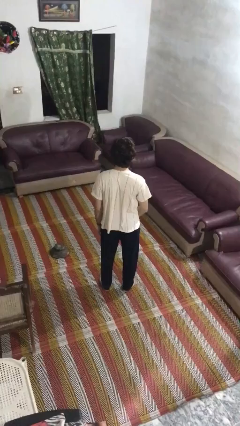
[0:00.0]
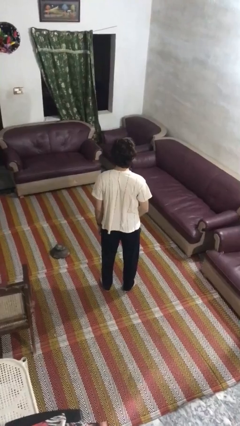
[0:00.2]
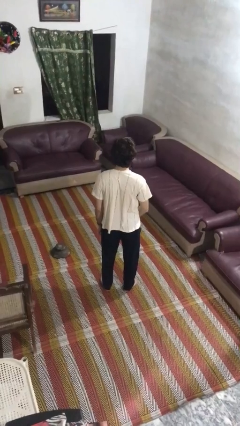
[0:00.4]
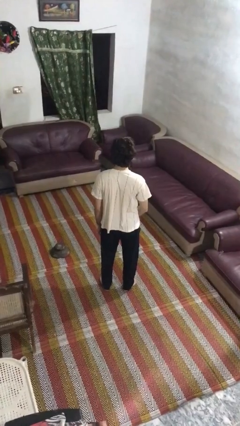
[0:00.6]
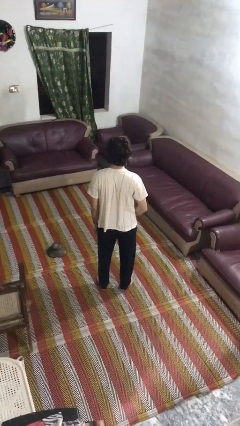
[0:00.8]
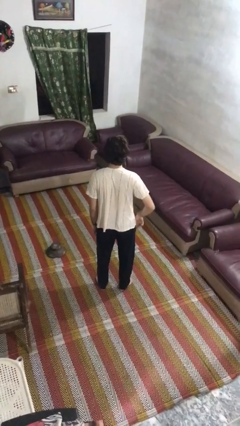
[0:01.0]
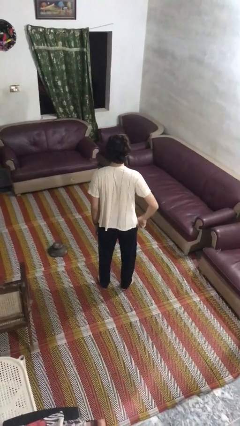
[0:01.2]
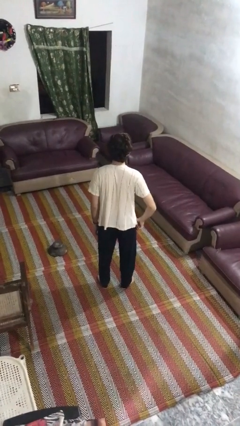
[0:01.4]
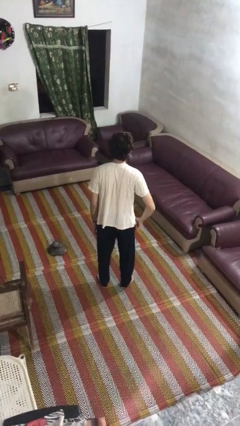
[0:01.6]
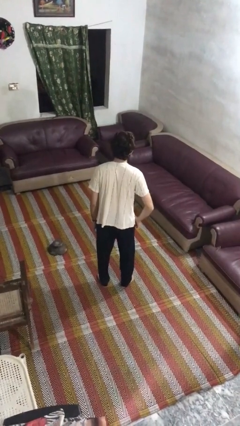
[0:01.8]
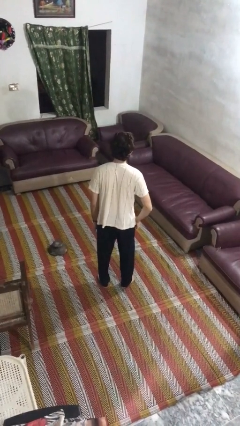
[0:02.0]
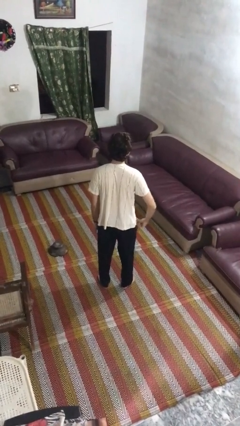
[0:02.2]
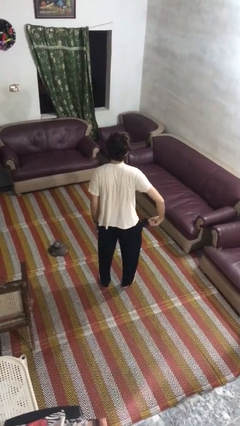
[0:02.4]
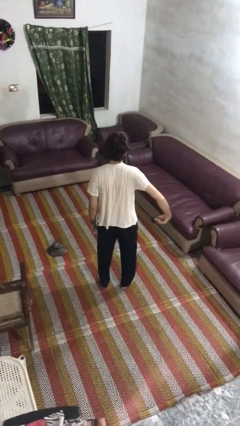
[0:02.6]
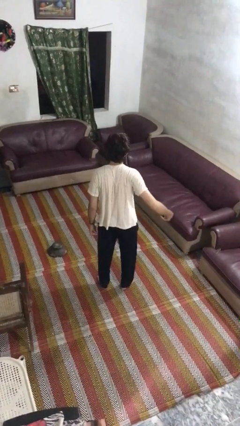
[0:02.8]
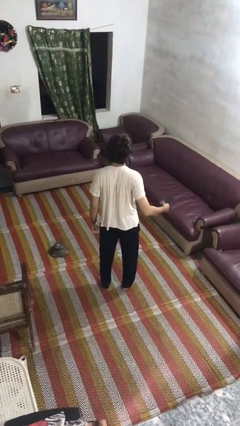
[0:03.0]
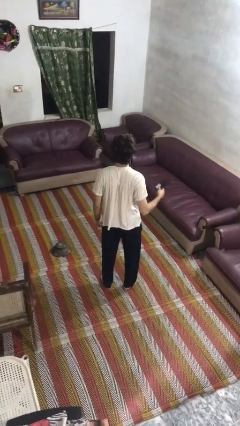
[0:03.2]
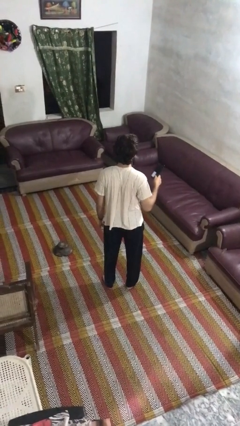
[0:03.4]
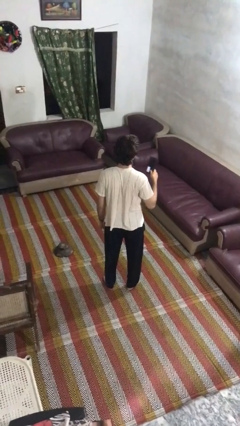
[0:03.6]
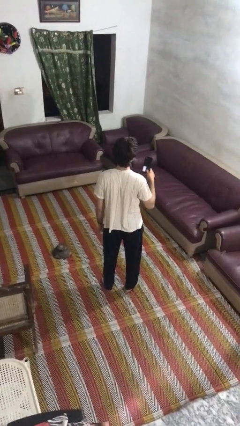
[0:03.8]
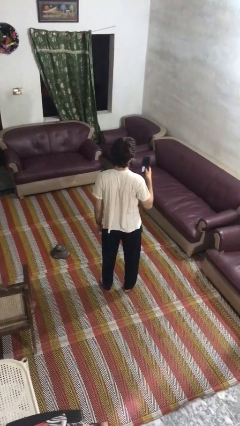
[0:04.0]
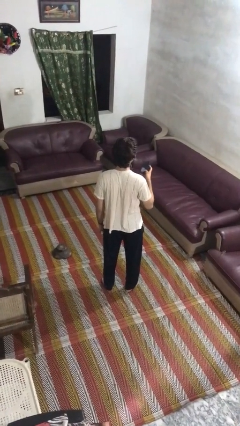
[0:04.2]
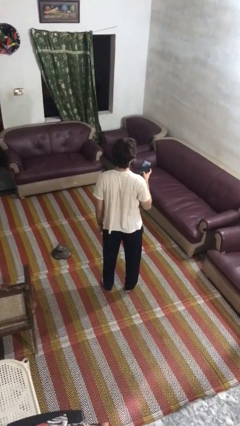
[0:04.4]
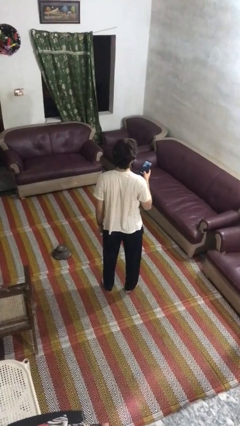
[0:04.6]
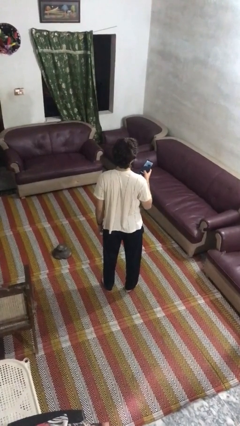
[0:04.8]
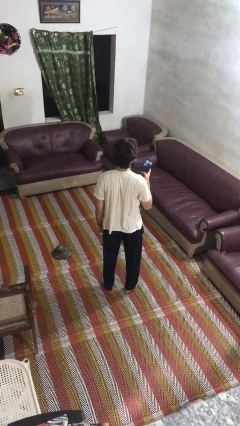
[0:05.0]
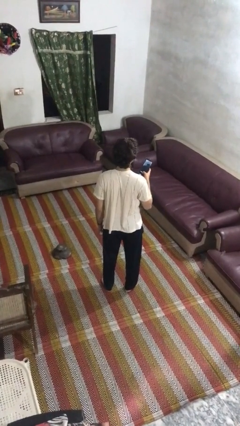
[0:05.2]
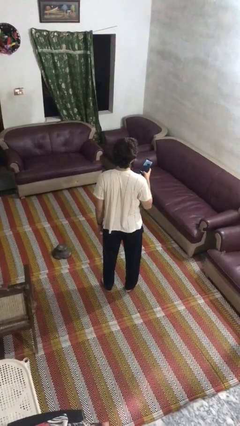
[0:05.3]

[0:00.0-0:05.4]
person takes phone from pocket

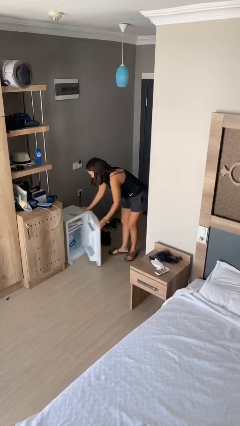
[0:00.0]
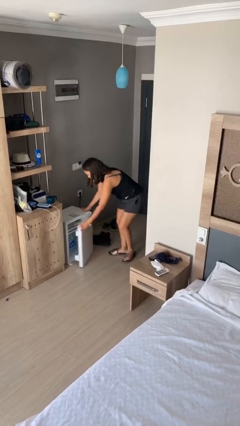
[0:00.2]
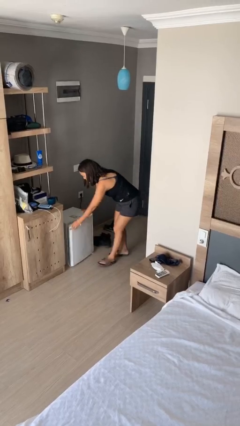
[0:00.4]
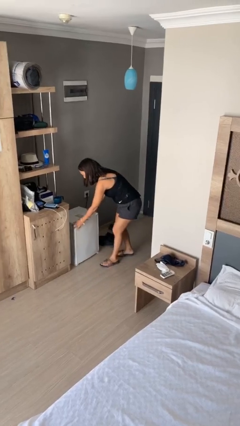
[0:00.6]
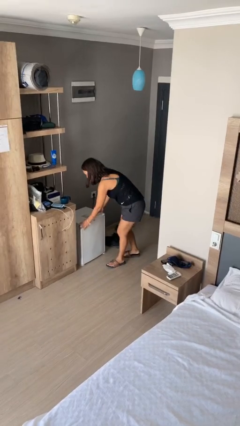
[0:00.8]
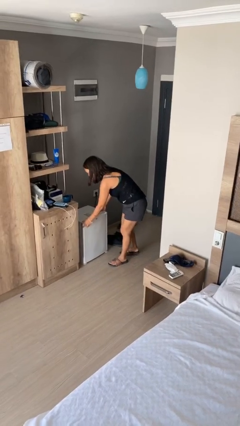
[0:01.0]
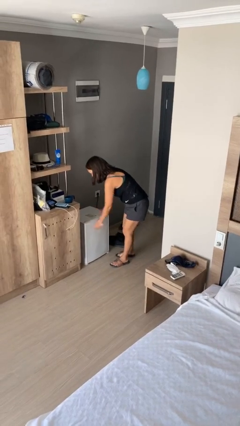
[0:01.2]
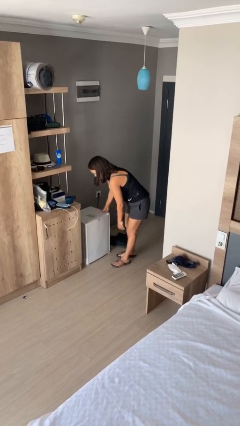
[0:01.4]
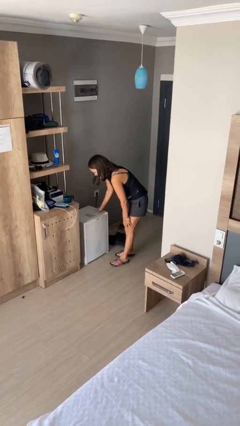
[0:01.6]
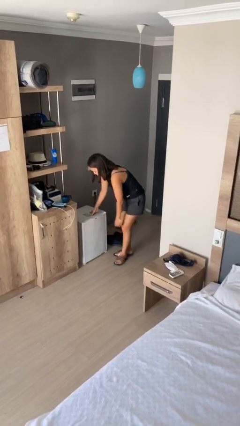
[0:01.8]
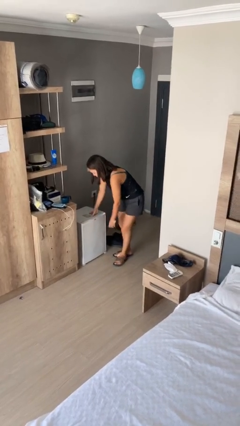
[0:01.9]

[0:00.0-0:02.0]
person closes refrigerator

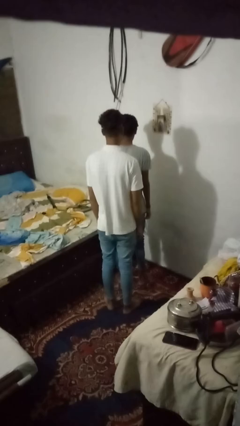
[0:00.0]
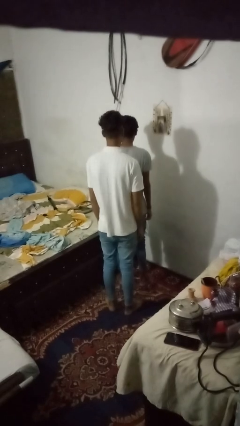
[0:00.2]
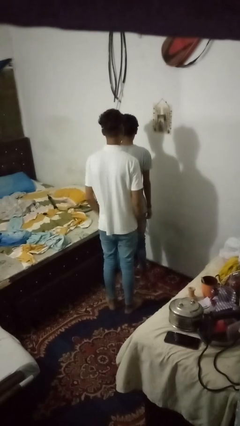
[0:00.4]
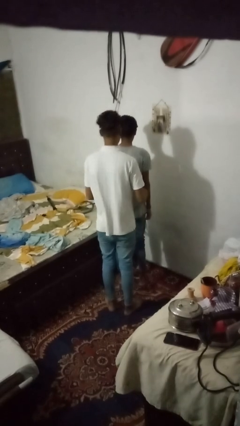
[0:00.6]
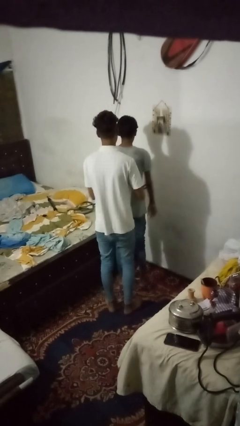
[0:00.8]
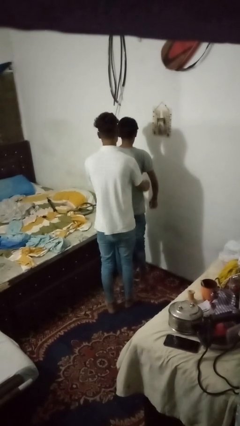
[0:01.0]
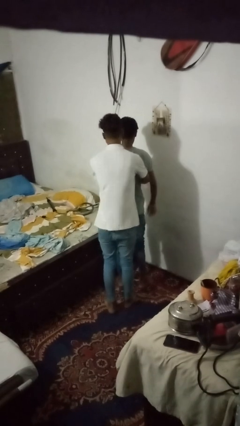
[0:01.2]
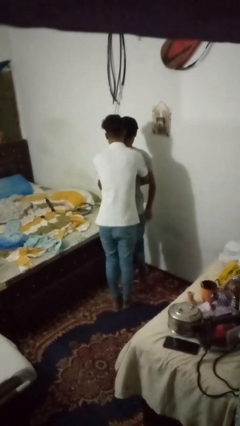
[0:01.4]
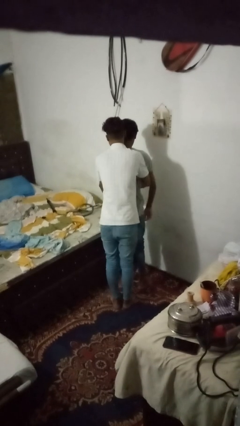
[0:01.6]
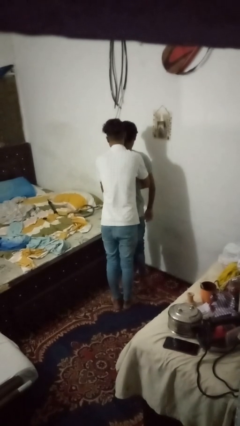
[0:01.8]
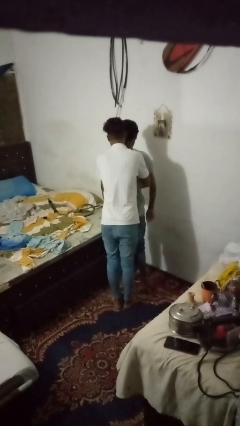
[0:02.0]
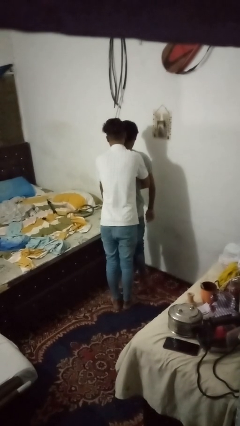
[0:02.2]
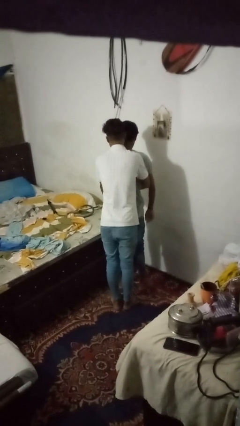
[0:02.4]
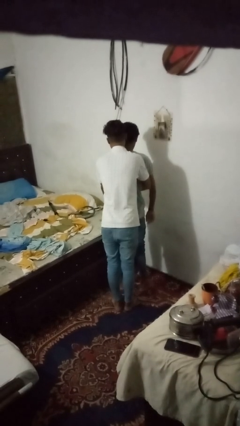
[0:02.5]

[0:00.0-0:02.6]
person hugs person from behind

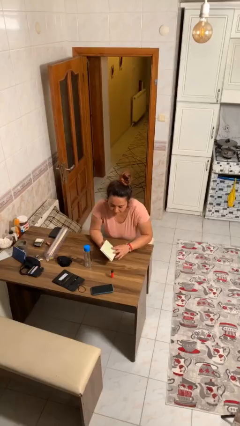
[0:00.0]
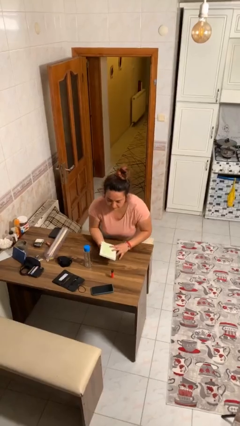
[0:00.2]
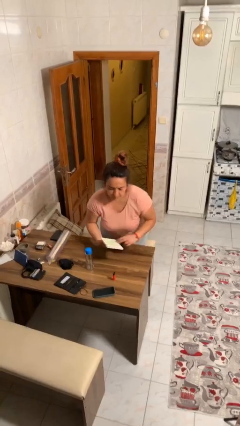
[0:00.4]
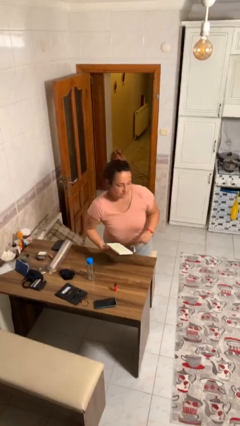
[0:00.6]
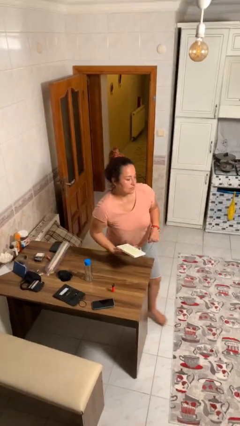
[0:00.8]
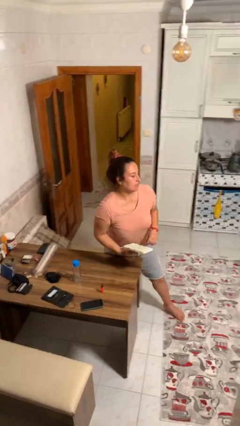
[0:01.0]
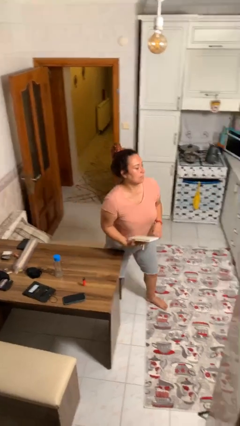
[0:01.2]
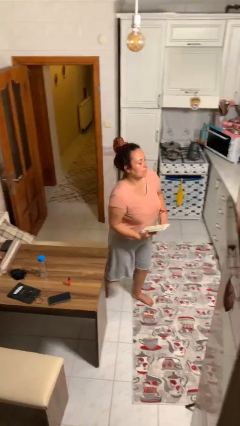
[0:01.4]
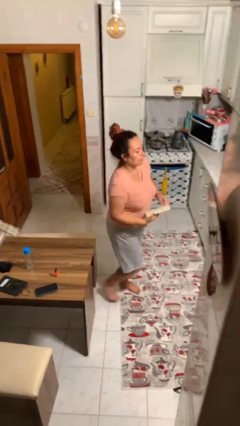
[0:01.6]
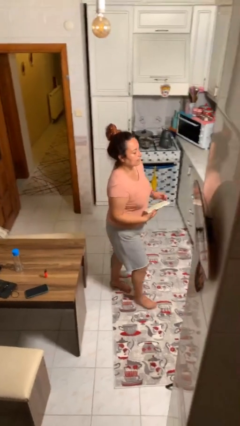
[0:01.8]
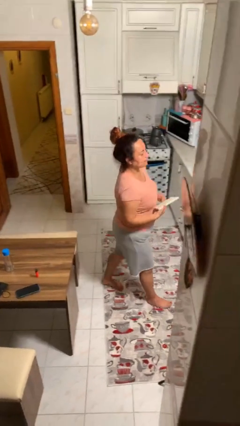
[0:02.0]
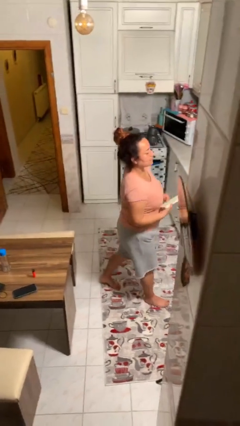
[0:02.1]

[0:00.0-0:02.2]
person stands up

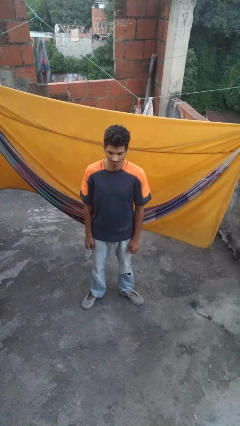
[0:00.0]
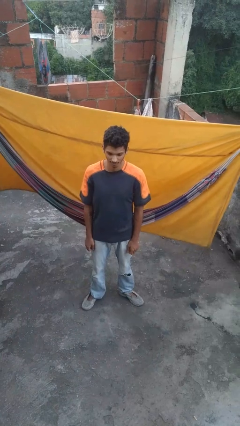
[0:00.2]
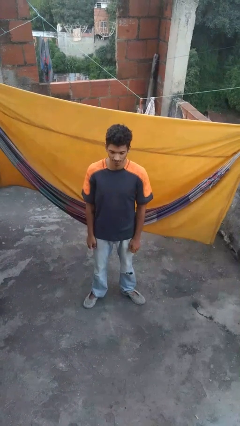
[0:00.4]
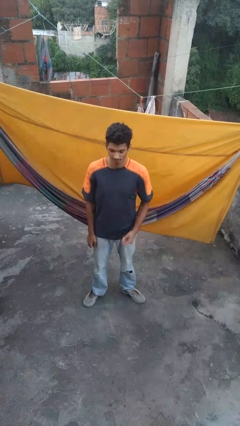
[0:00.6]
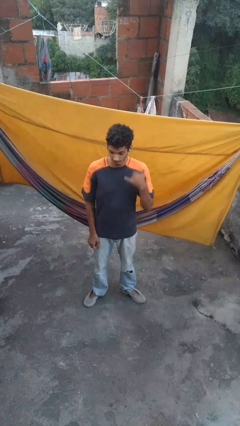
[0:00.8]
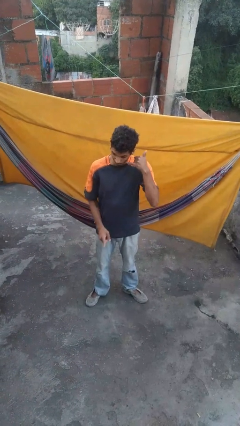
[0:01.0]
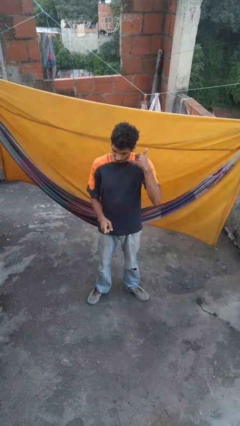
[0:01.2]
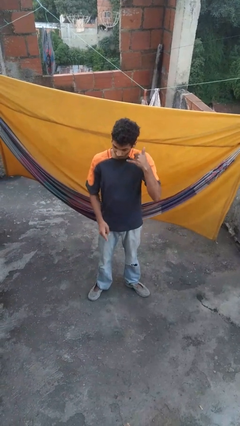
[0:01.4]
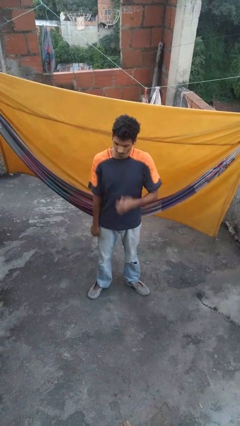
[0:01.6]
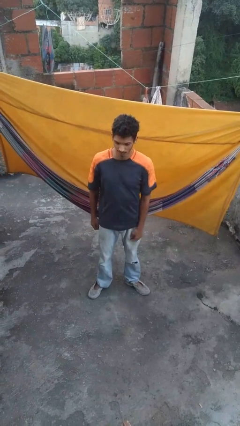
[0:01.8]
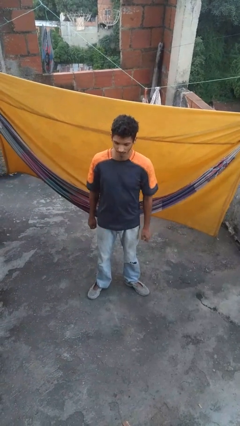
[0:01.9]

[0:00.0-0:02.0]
person gestures call me

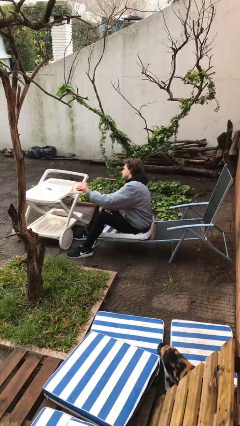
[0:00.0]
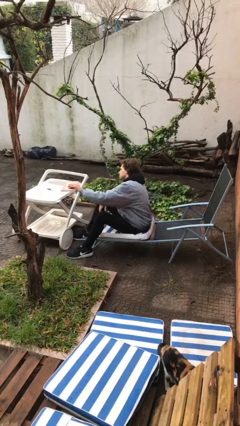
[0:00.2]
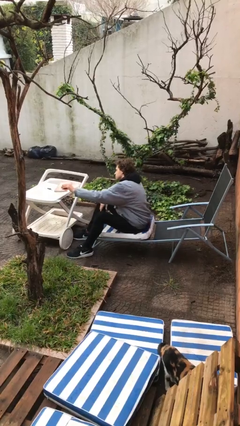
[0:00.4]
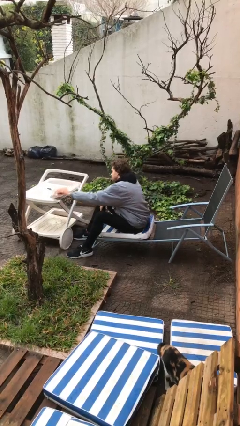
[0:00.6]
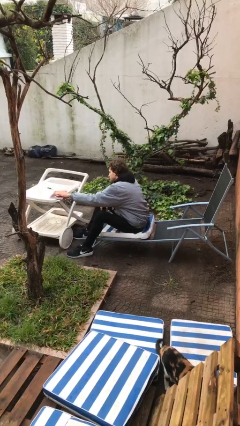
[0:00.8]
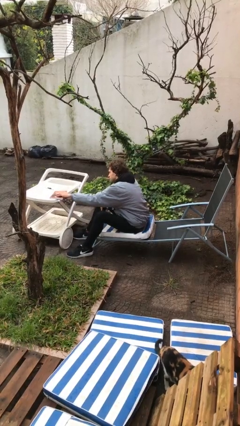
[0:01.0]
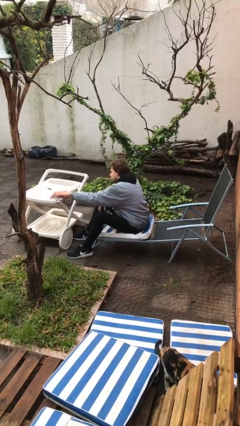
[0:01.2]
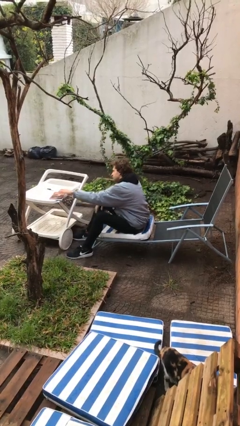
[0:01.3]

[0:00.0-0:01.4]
person puts down object on table

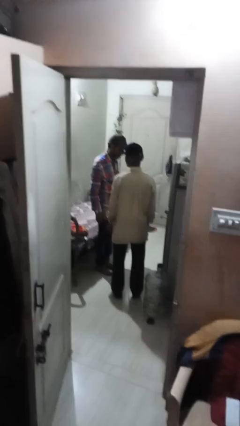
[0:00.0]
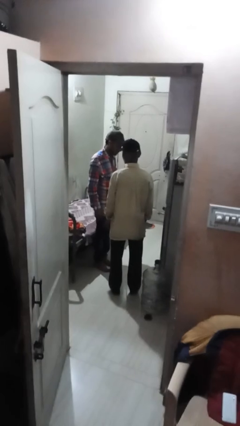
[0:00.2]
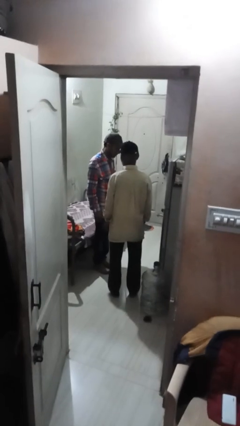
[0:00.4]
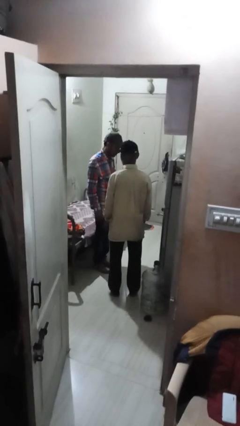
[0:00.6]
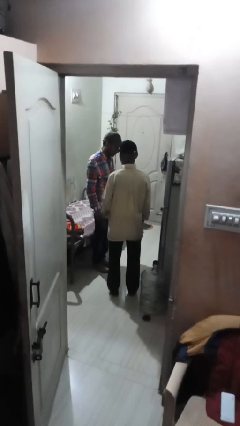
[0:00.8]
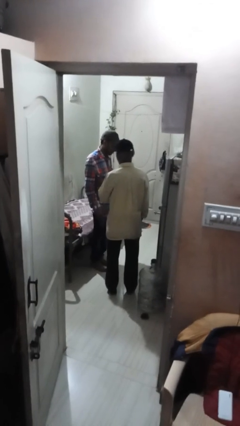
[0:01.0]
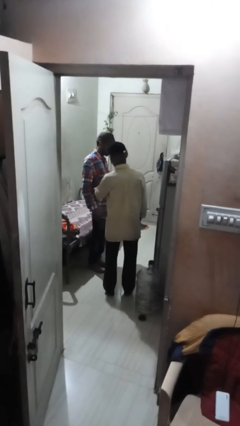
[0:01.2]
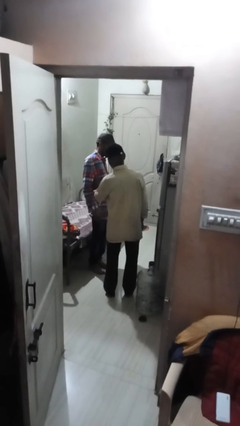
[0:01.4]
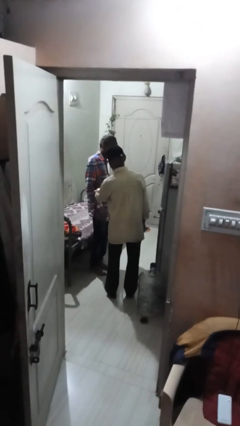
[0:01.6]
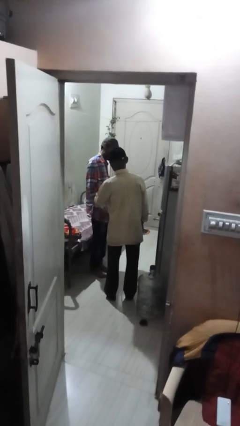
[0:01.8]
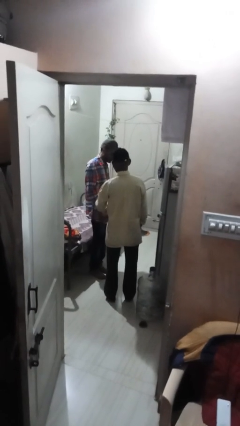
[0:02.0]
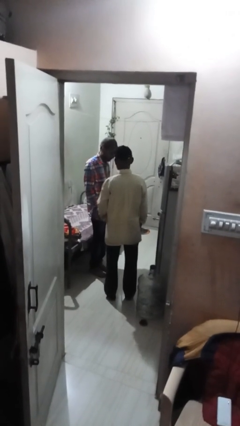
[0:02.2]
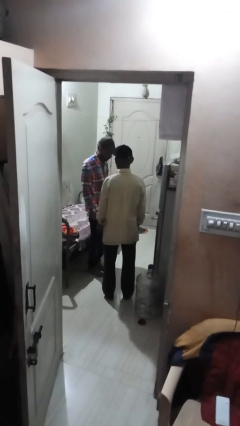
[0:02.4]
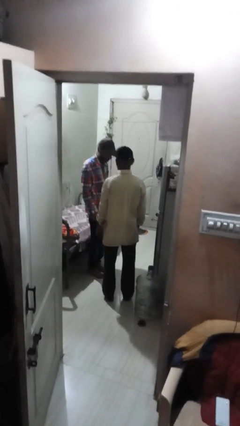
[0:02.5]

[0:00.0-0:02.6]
person tickles person
